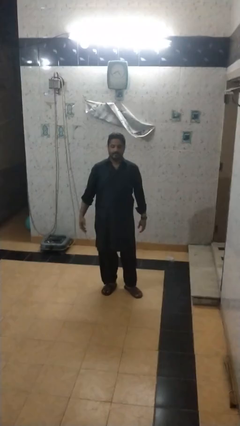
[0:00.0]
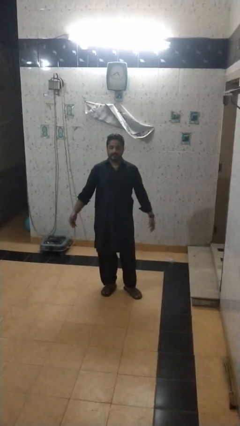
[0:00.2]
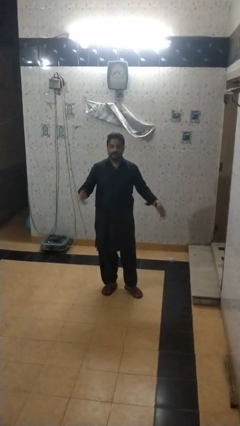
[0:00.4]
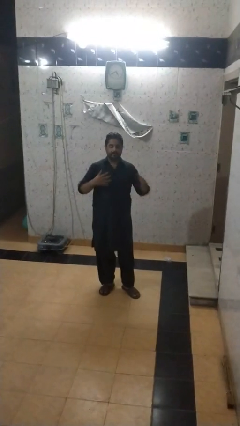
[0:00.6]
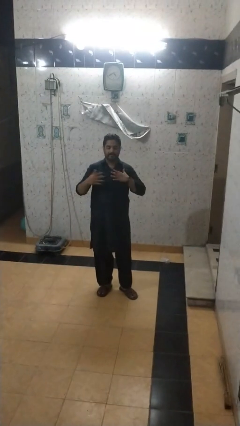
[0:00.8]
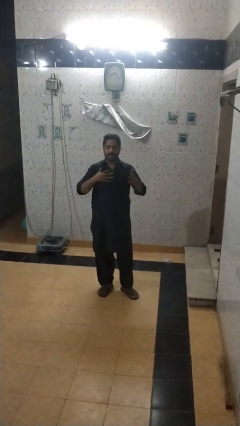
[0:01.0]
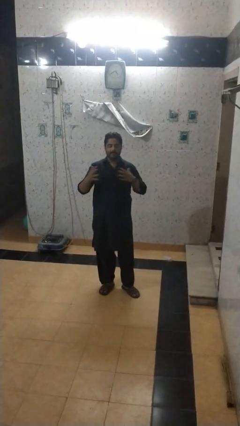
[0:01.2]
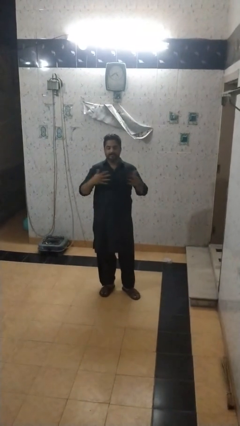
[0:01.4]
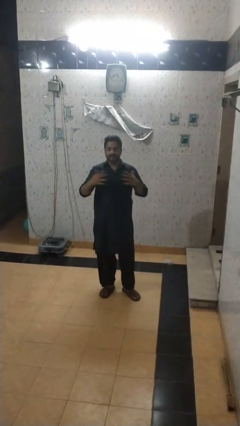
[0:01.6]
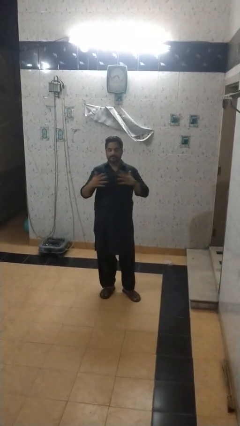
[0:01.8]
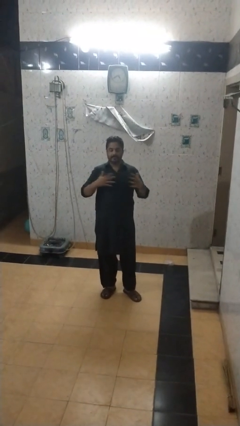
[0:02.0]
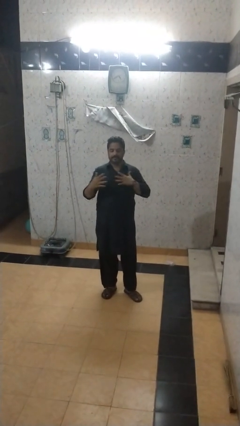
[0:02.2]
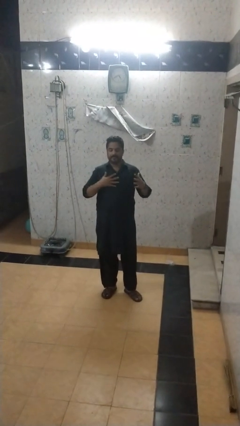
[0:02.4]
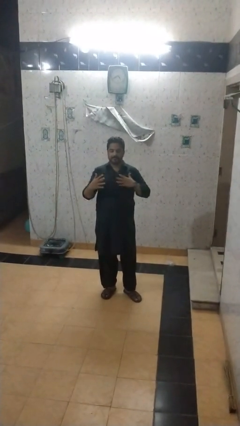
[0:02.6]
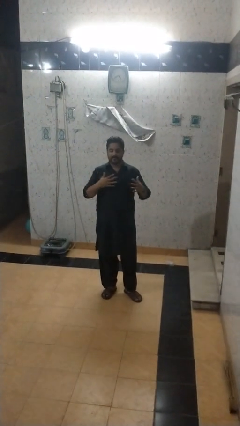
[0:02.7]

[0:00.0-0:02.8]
person drums on chest

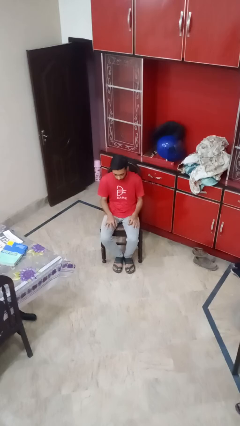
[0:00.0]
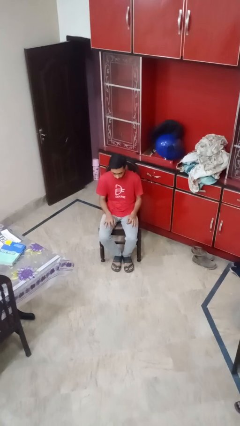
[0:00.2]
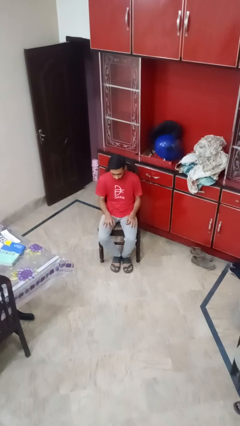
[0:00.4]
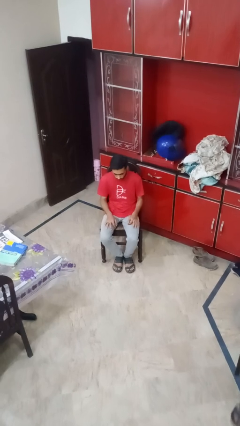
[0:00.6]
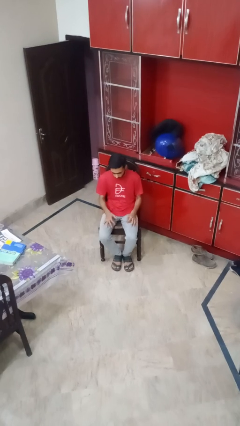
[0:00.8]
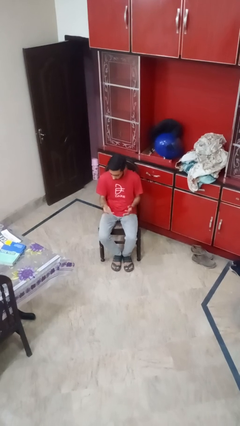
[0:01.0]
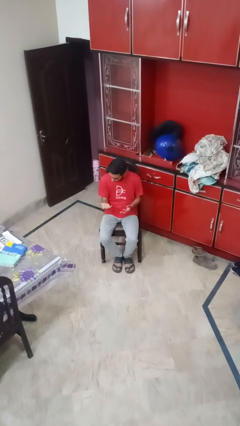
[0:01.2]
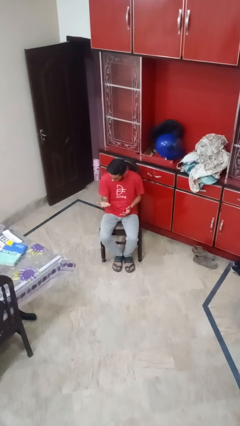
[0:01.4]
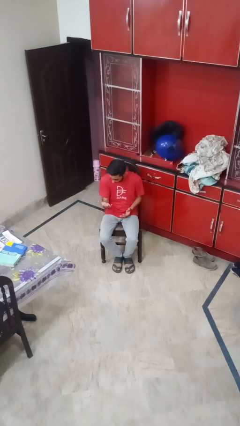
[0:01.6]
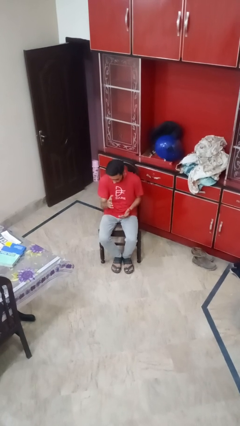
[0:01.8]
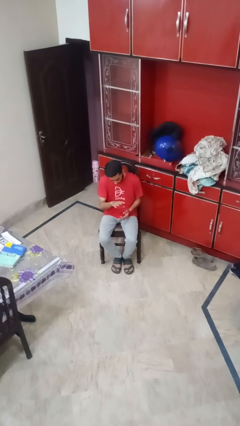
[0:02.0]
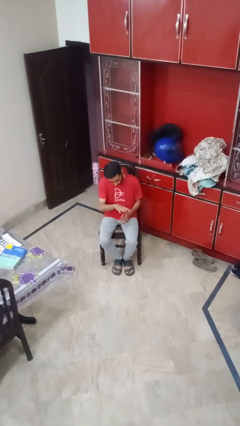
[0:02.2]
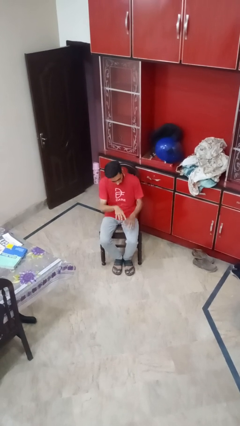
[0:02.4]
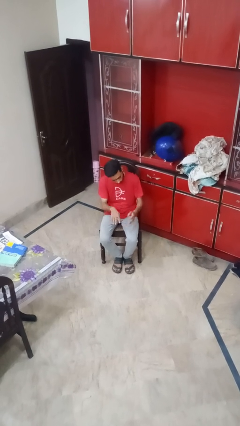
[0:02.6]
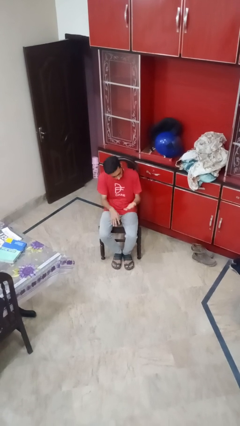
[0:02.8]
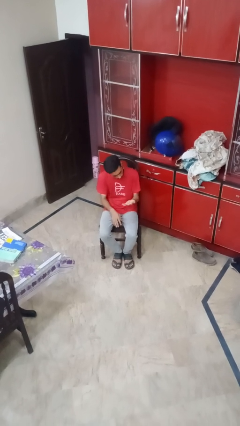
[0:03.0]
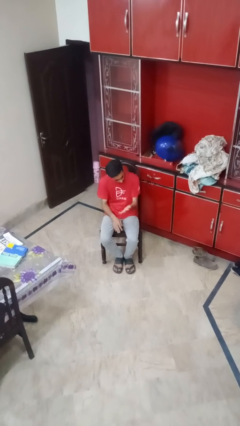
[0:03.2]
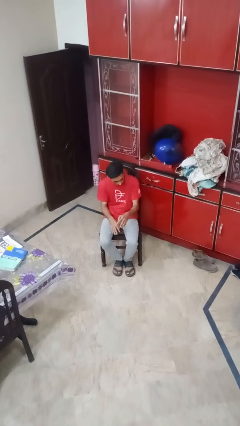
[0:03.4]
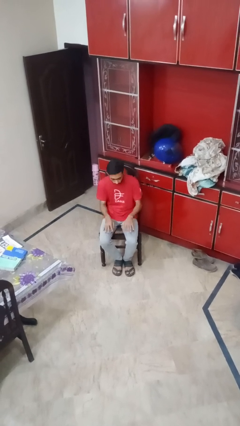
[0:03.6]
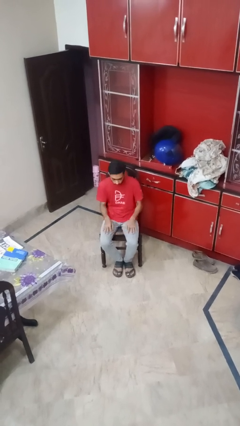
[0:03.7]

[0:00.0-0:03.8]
person looks at hands in lap

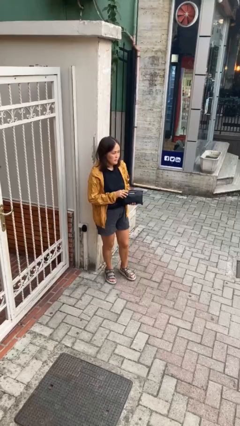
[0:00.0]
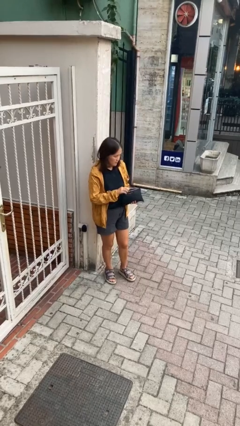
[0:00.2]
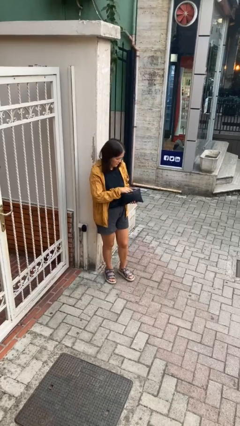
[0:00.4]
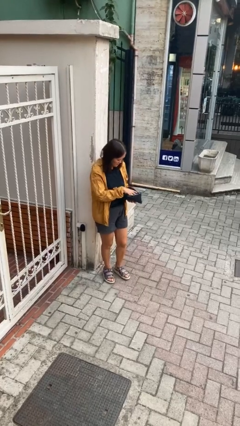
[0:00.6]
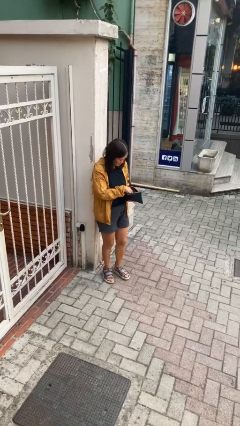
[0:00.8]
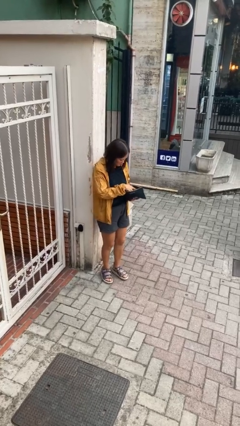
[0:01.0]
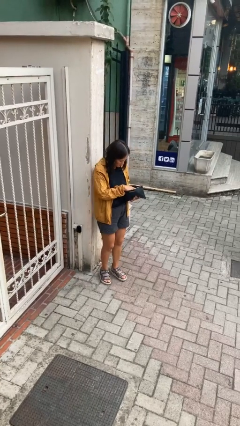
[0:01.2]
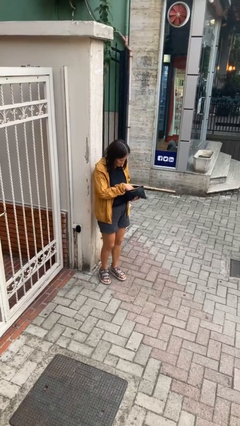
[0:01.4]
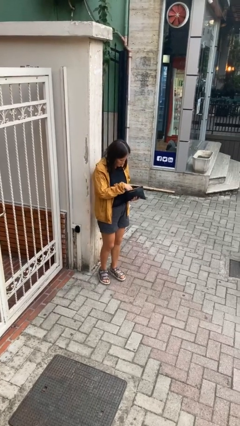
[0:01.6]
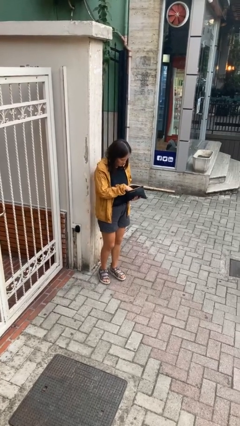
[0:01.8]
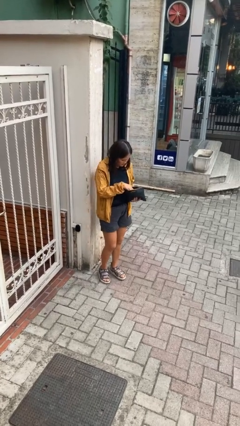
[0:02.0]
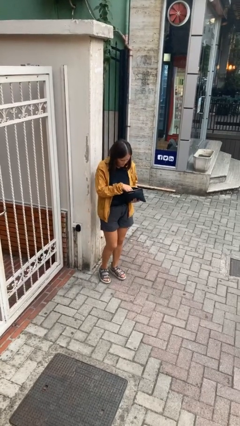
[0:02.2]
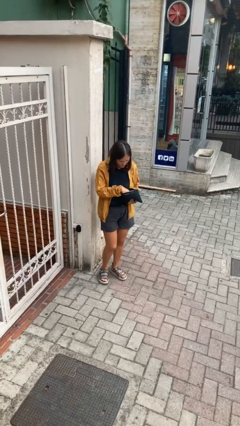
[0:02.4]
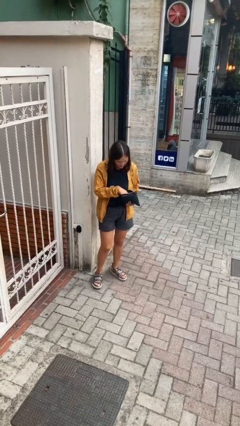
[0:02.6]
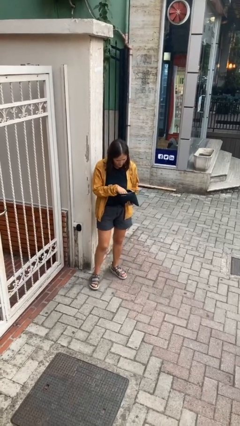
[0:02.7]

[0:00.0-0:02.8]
person searches in purse

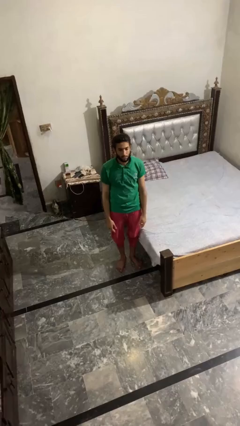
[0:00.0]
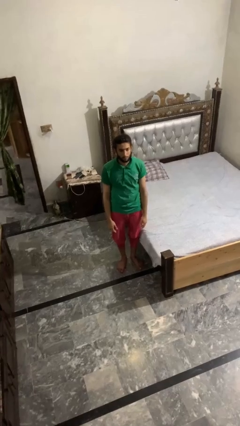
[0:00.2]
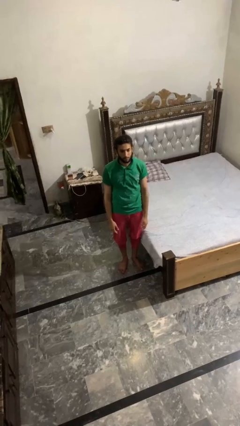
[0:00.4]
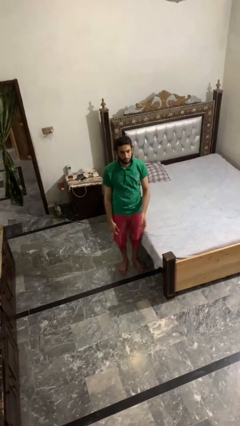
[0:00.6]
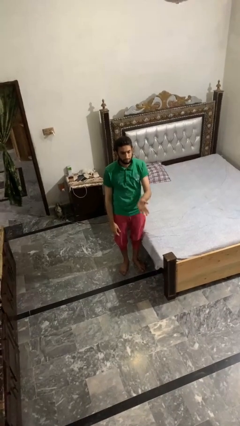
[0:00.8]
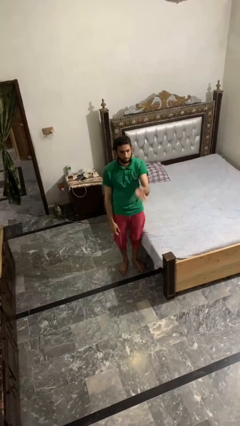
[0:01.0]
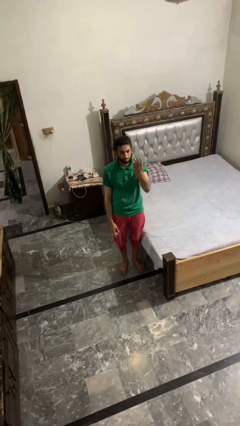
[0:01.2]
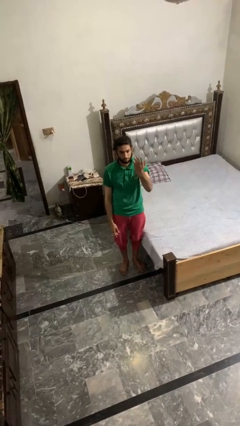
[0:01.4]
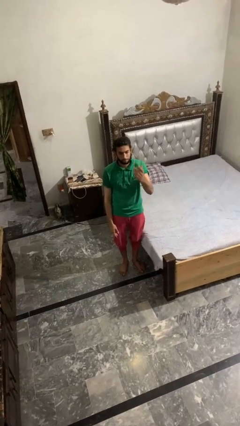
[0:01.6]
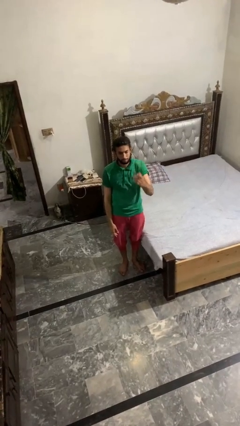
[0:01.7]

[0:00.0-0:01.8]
person gestures swipe up

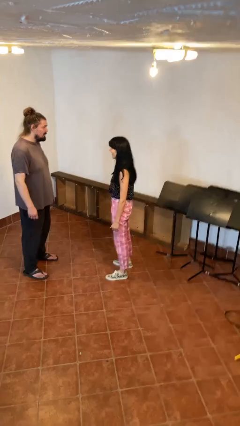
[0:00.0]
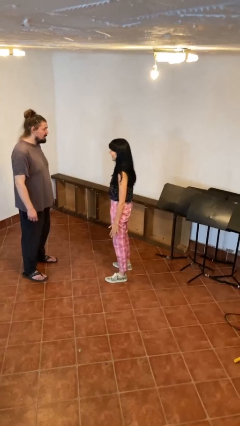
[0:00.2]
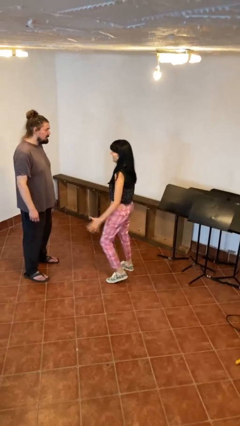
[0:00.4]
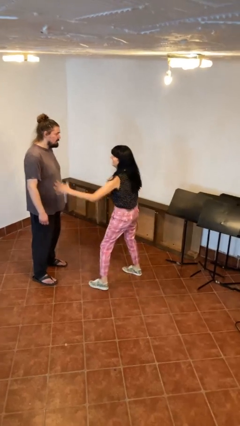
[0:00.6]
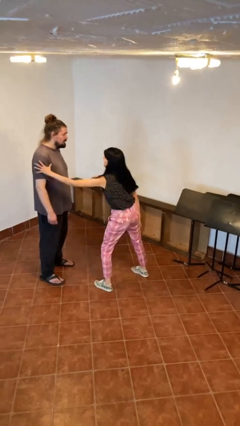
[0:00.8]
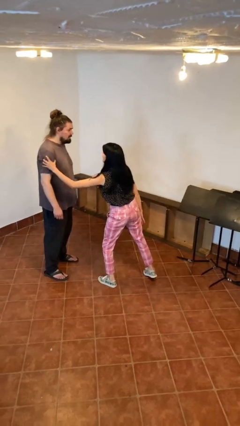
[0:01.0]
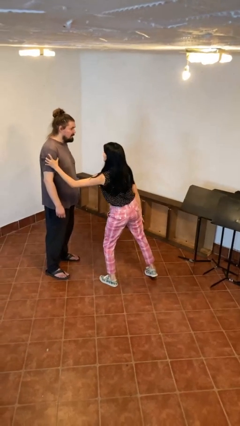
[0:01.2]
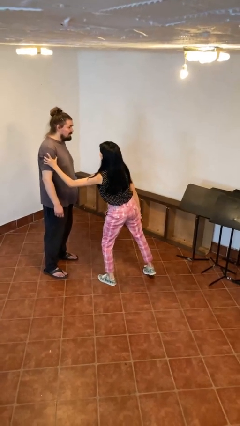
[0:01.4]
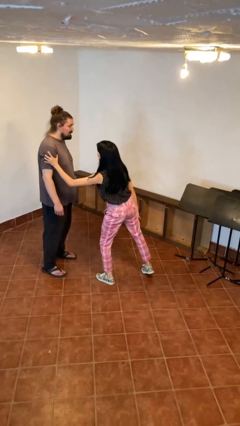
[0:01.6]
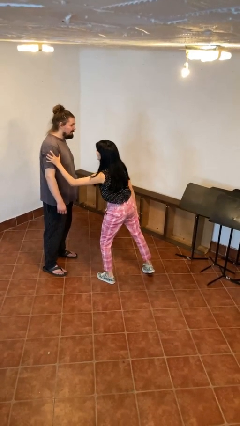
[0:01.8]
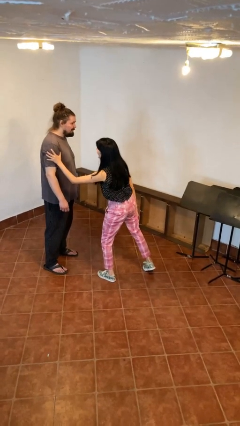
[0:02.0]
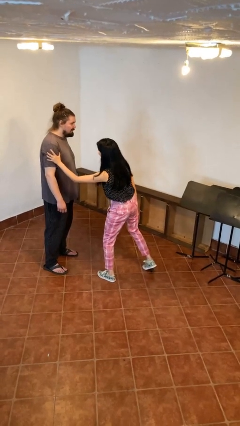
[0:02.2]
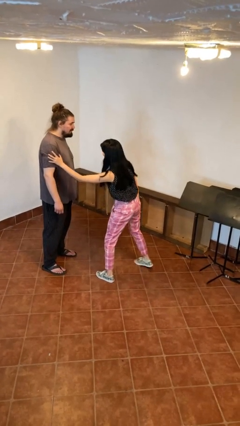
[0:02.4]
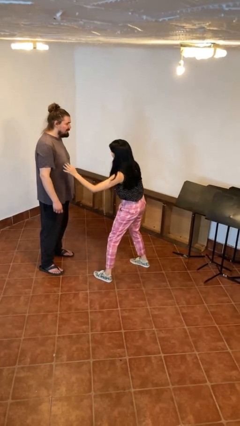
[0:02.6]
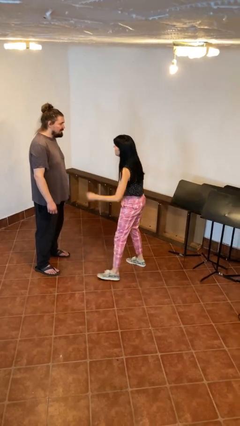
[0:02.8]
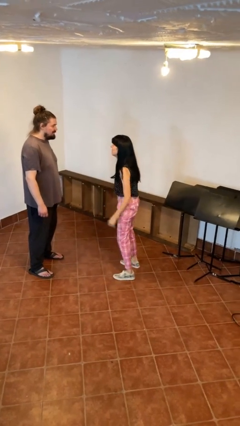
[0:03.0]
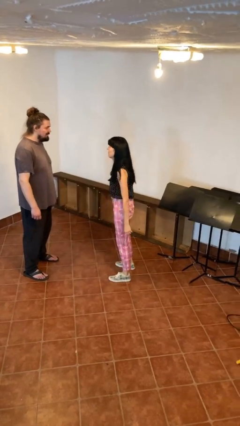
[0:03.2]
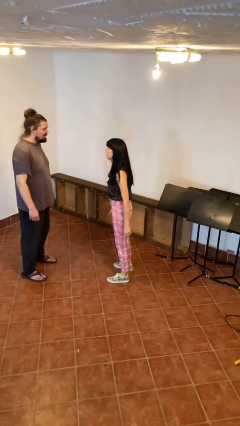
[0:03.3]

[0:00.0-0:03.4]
person grabs person by bicep

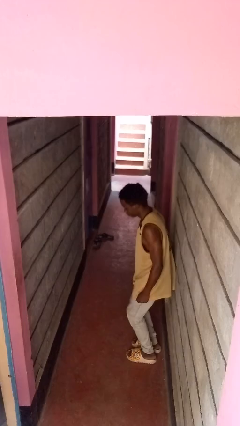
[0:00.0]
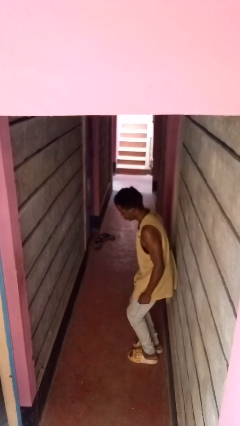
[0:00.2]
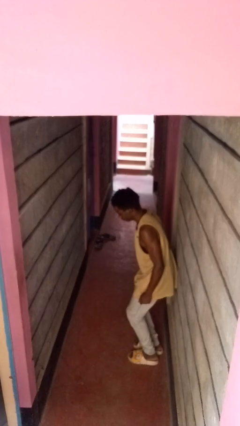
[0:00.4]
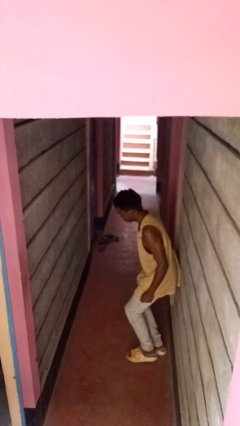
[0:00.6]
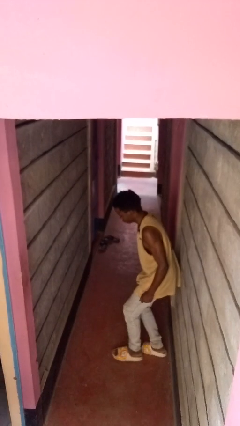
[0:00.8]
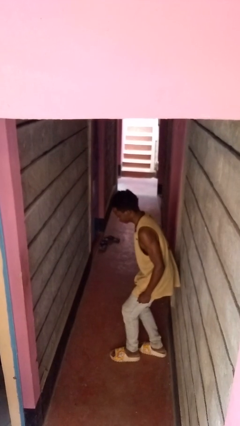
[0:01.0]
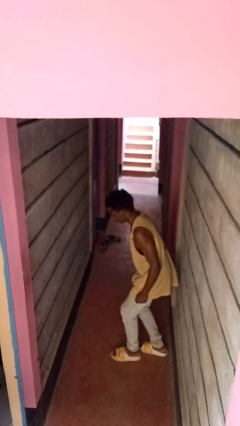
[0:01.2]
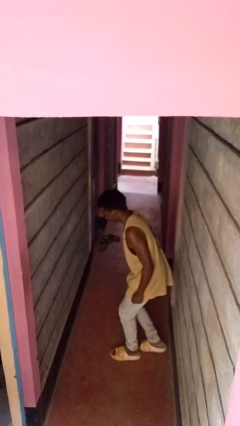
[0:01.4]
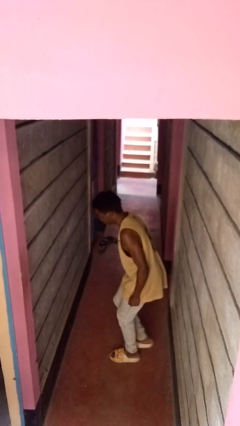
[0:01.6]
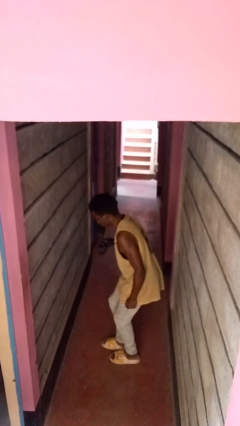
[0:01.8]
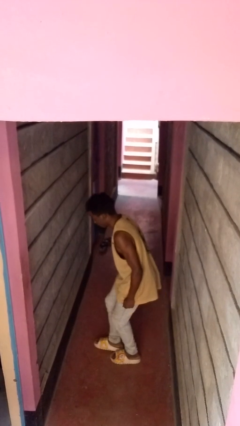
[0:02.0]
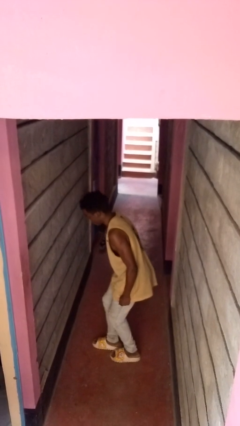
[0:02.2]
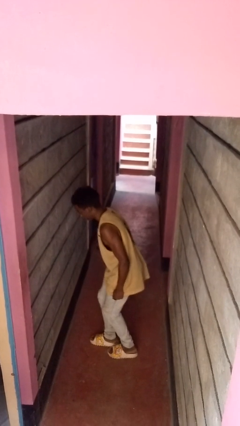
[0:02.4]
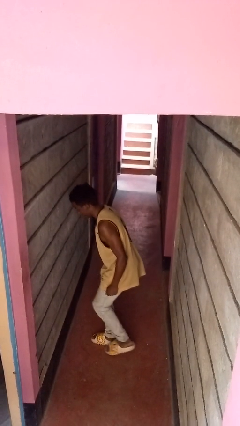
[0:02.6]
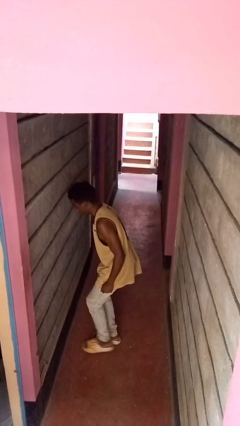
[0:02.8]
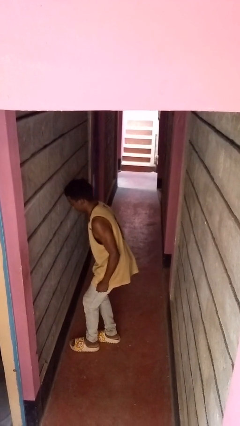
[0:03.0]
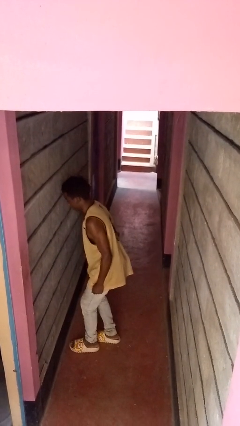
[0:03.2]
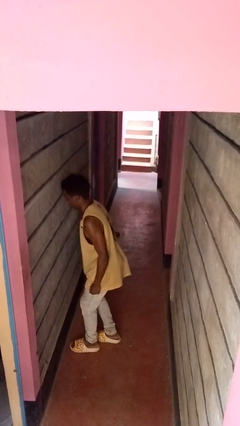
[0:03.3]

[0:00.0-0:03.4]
person walks tiptoe
